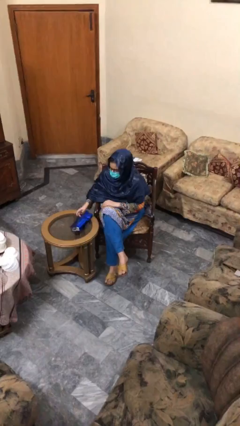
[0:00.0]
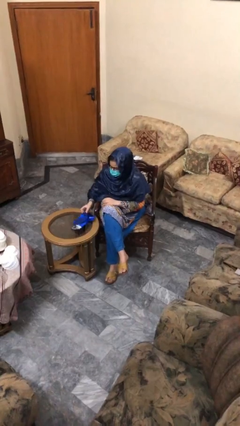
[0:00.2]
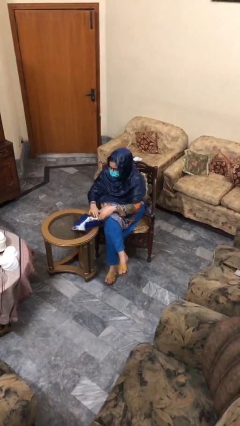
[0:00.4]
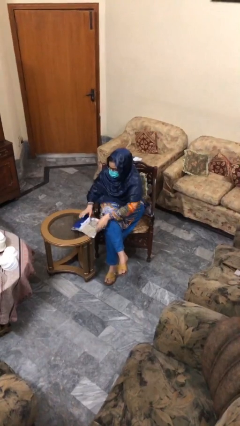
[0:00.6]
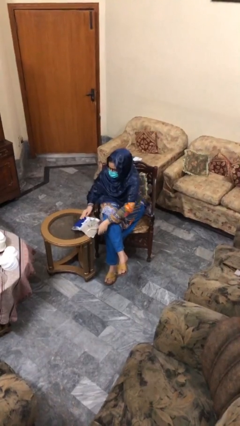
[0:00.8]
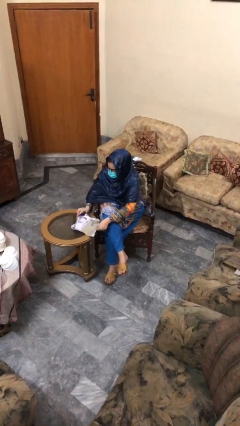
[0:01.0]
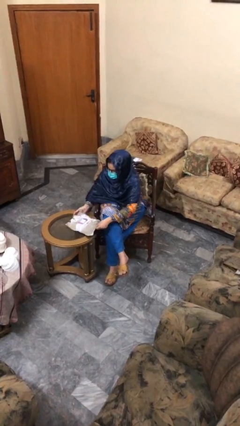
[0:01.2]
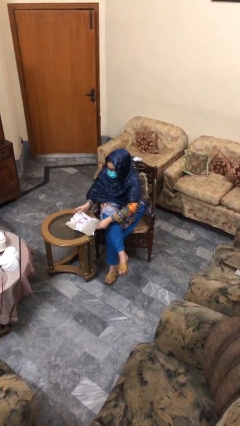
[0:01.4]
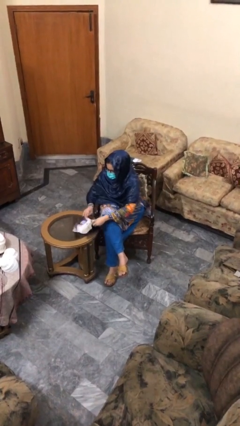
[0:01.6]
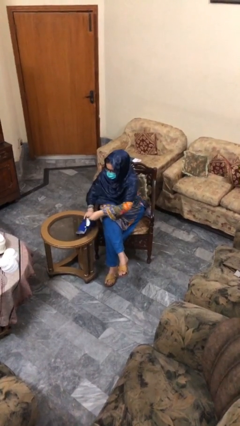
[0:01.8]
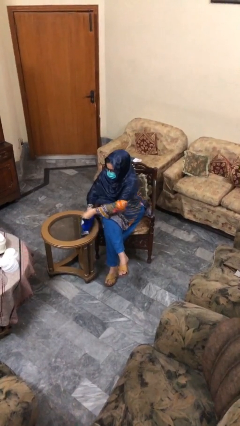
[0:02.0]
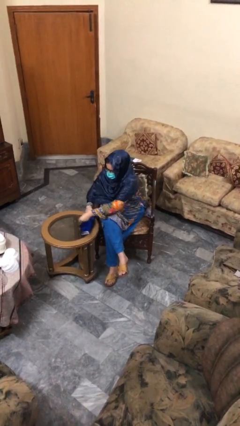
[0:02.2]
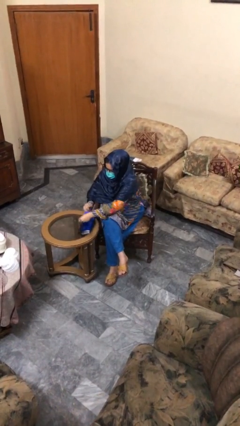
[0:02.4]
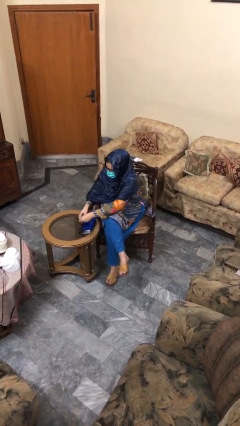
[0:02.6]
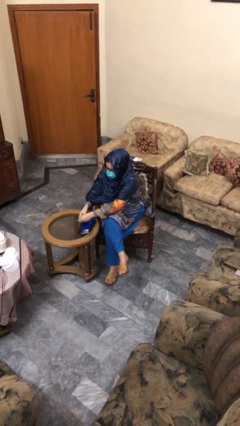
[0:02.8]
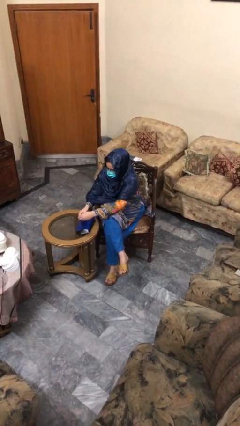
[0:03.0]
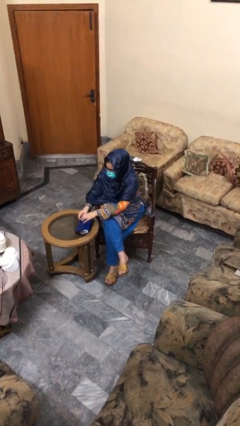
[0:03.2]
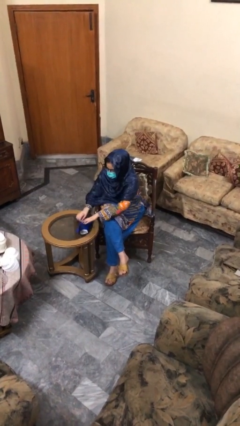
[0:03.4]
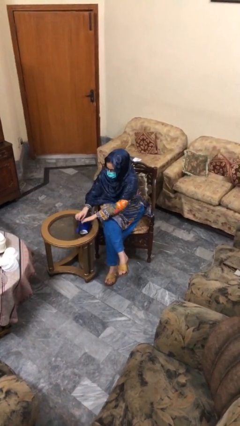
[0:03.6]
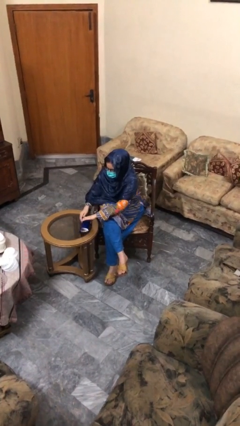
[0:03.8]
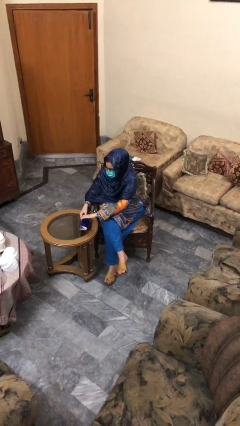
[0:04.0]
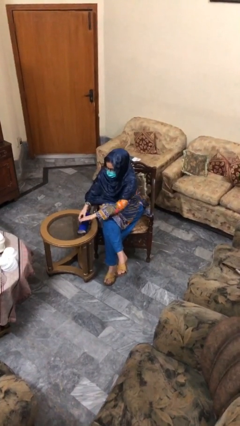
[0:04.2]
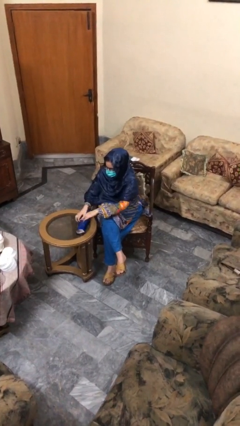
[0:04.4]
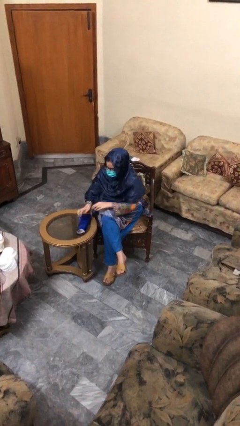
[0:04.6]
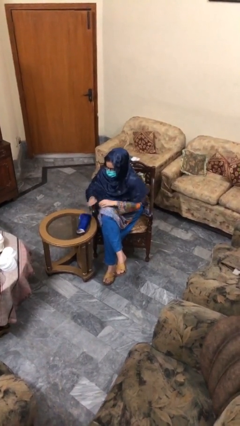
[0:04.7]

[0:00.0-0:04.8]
person wraps box

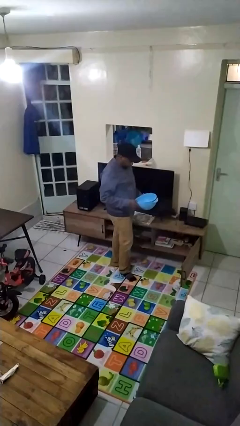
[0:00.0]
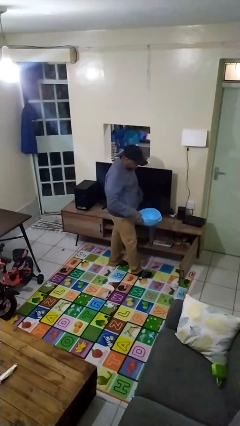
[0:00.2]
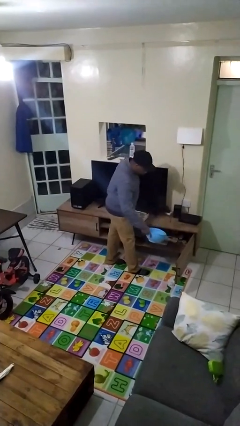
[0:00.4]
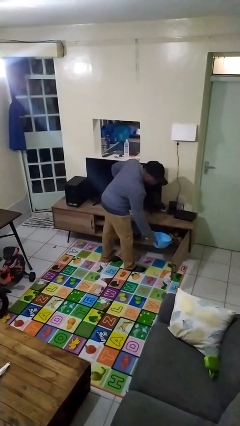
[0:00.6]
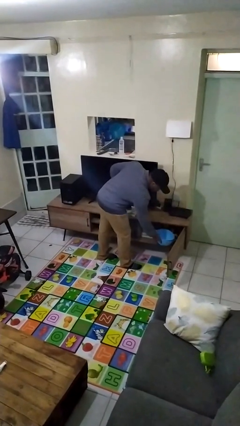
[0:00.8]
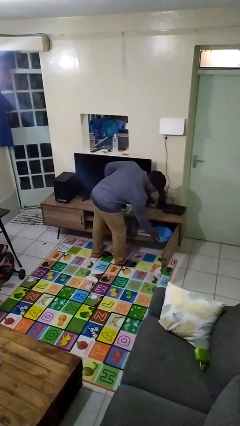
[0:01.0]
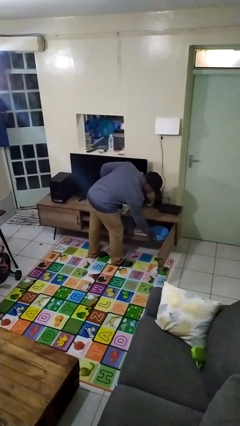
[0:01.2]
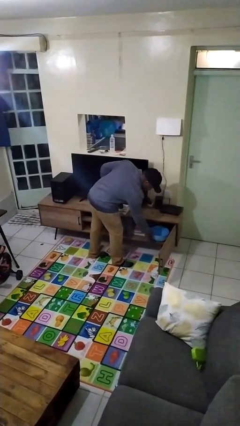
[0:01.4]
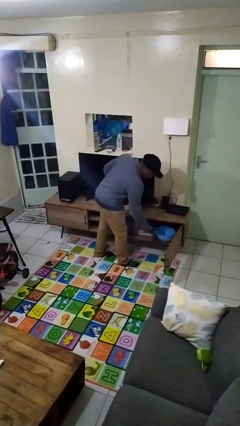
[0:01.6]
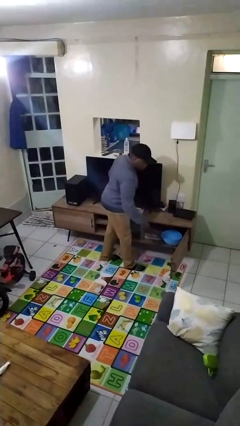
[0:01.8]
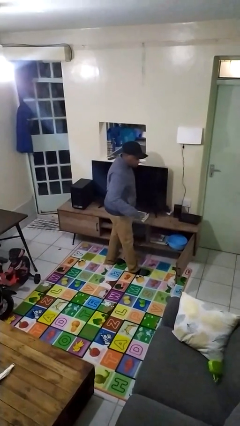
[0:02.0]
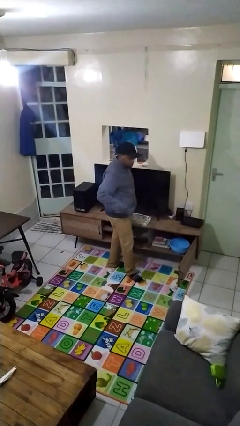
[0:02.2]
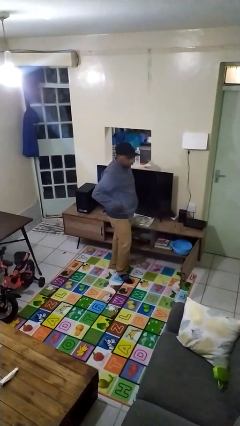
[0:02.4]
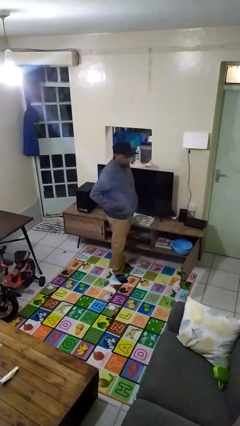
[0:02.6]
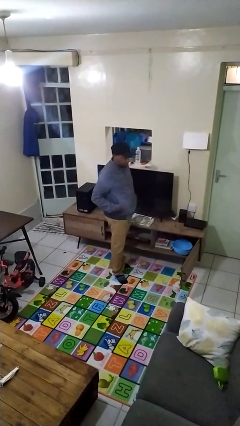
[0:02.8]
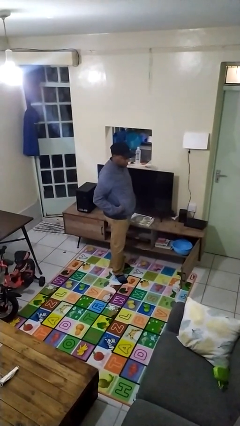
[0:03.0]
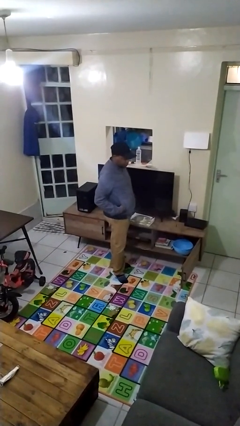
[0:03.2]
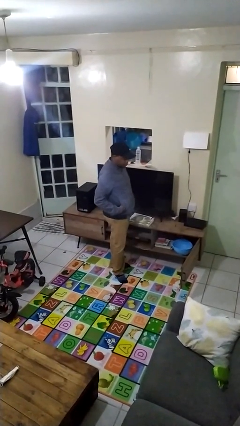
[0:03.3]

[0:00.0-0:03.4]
person puts down object into cabinet

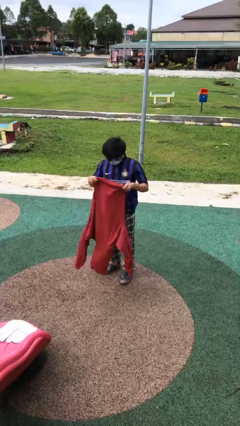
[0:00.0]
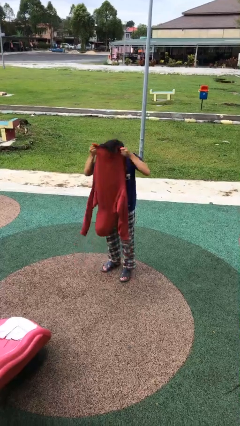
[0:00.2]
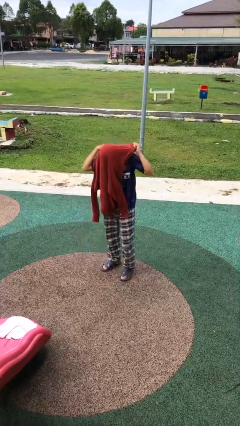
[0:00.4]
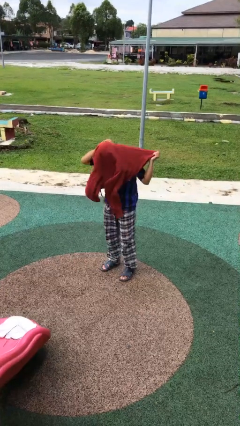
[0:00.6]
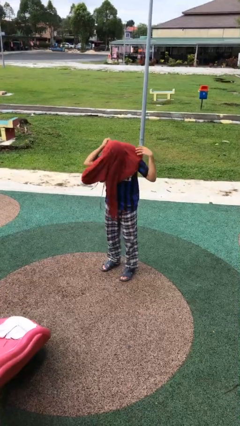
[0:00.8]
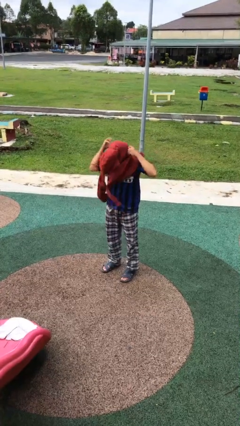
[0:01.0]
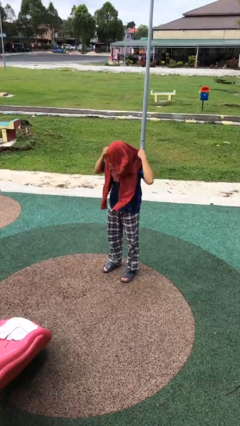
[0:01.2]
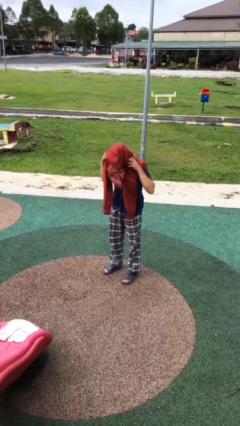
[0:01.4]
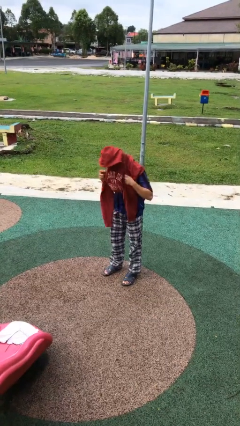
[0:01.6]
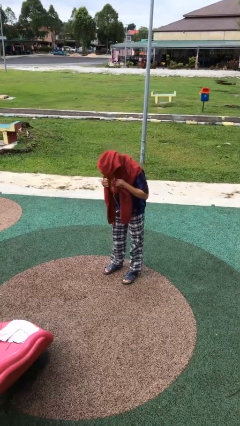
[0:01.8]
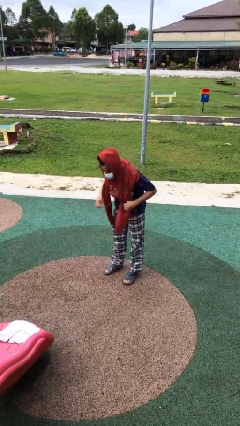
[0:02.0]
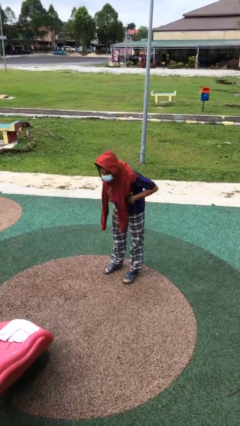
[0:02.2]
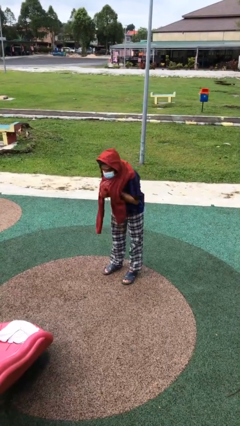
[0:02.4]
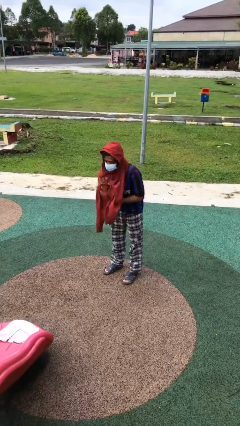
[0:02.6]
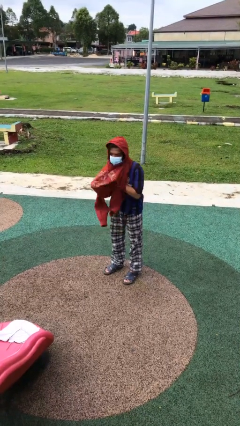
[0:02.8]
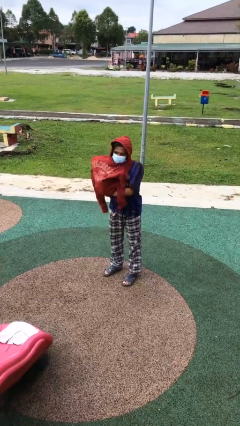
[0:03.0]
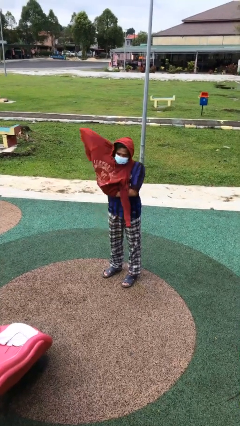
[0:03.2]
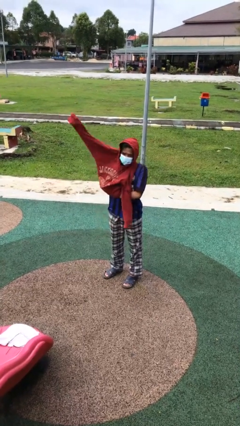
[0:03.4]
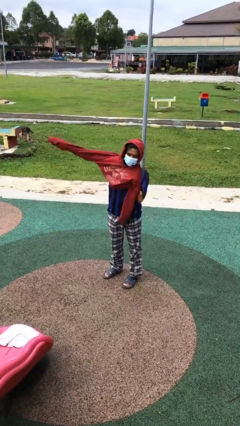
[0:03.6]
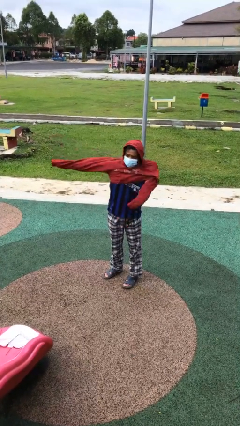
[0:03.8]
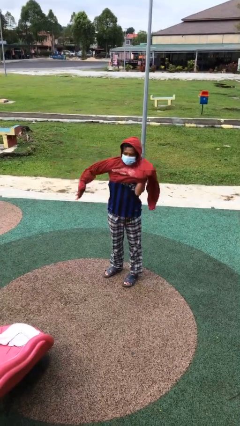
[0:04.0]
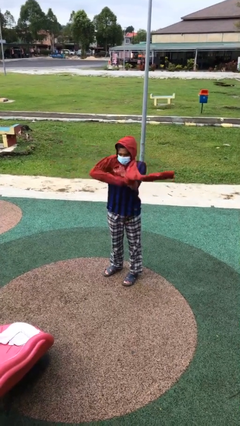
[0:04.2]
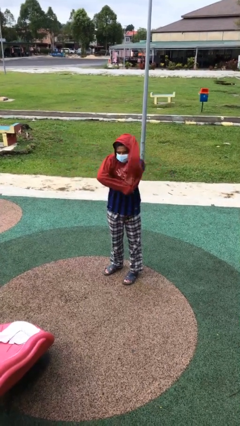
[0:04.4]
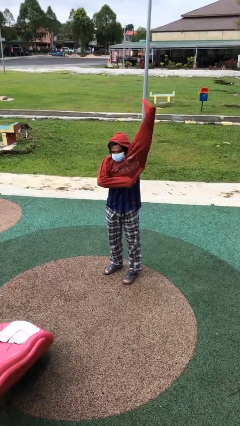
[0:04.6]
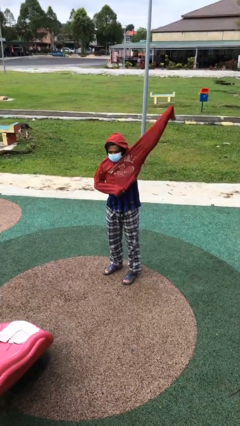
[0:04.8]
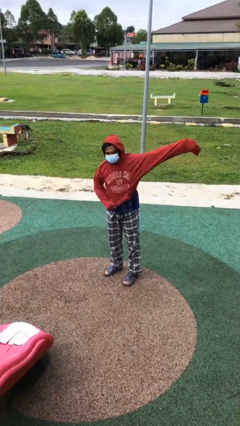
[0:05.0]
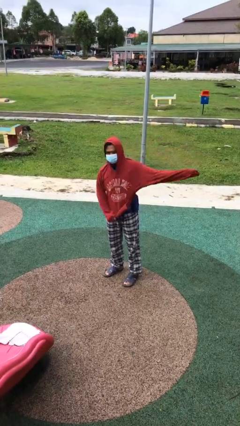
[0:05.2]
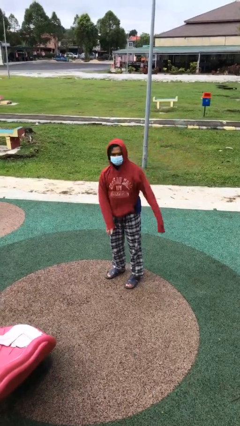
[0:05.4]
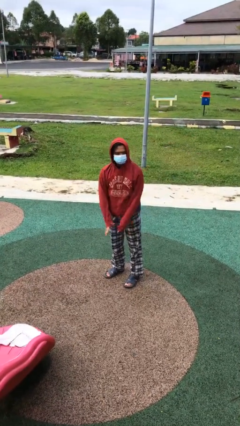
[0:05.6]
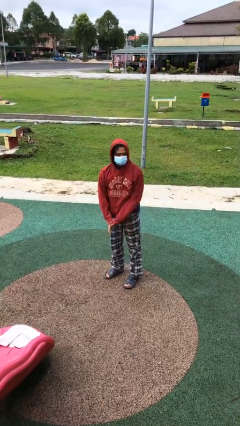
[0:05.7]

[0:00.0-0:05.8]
person puts on hoodie

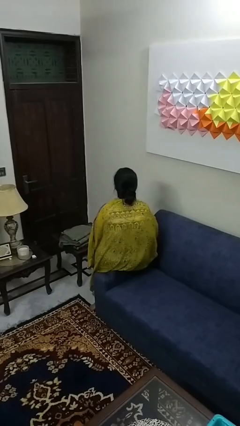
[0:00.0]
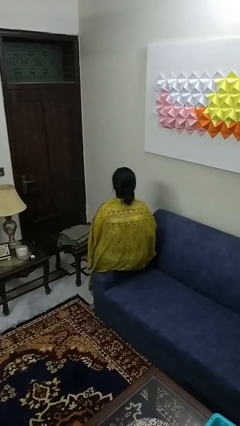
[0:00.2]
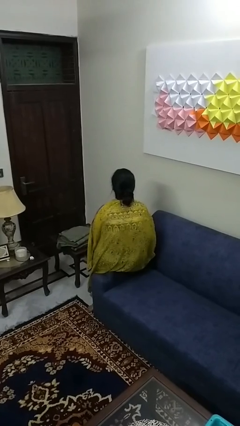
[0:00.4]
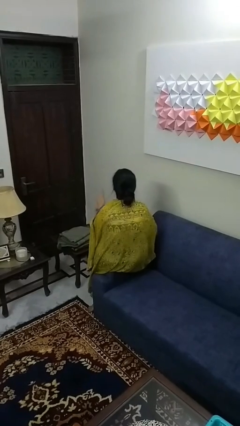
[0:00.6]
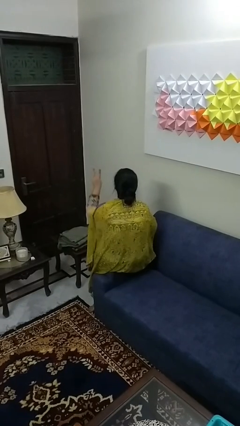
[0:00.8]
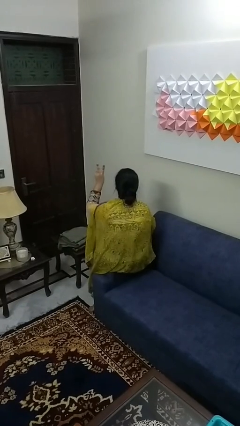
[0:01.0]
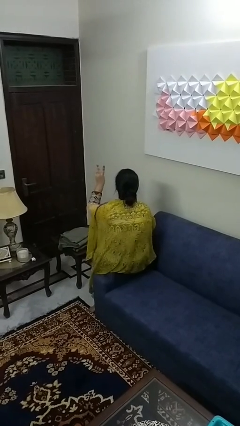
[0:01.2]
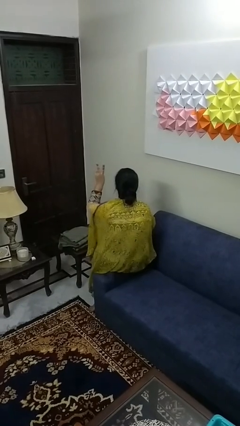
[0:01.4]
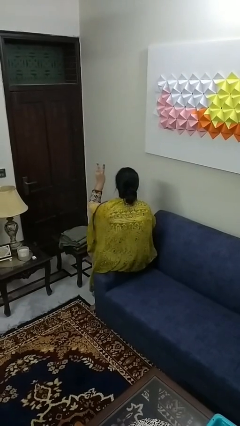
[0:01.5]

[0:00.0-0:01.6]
person gestures peace

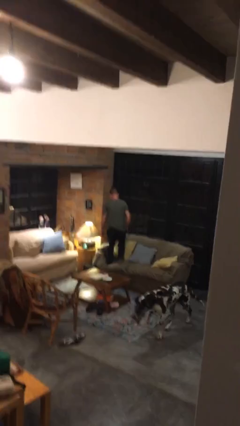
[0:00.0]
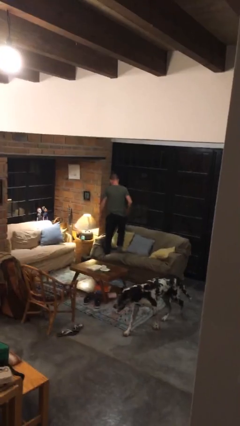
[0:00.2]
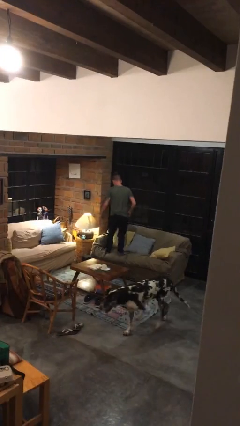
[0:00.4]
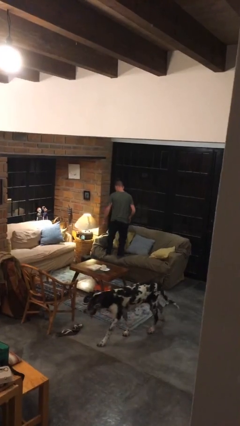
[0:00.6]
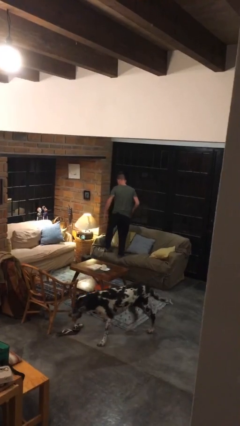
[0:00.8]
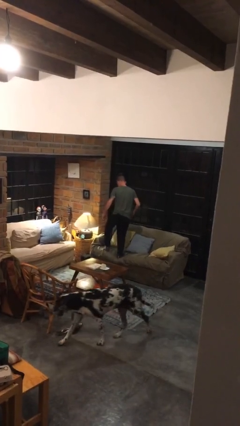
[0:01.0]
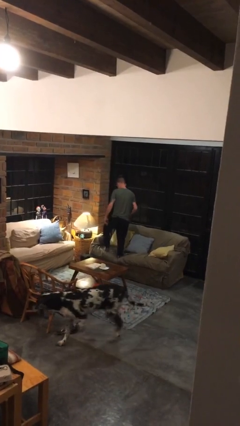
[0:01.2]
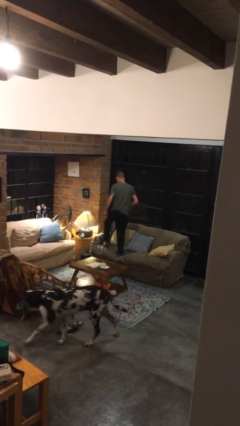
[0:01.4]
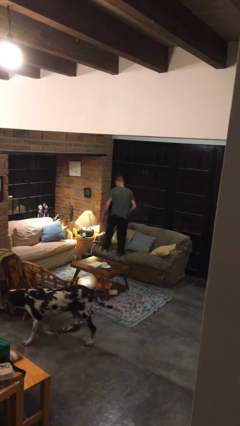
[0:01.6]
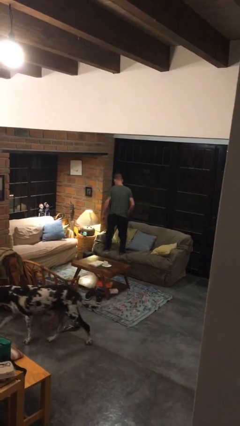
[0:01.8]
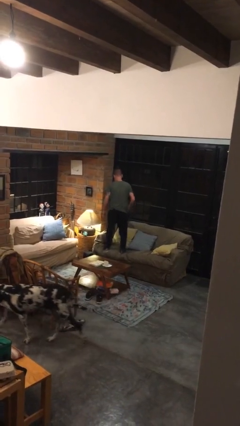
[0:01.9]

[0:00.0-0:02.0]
person jumps on couch
